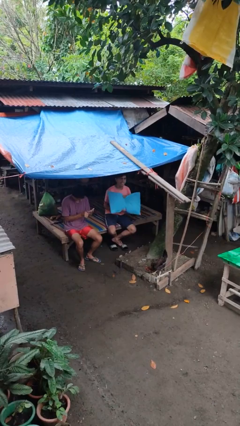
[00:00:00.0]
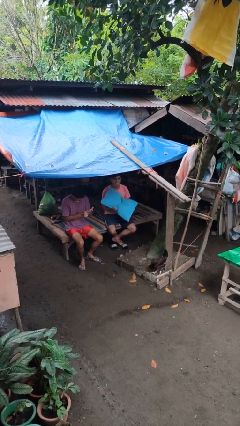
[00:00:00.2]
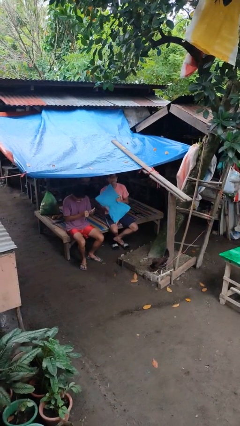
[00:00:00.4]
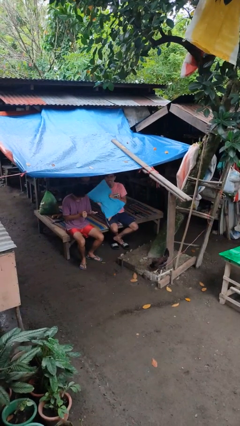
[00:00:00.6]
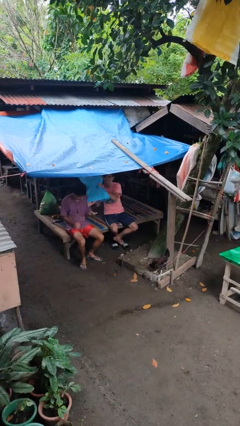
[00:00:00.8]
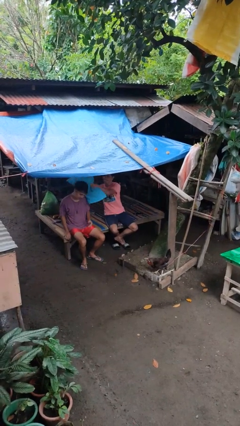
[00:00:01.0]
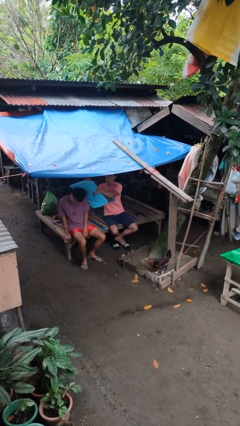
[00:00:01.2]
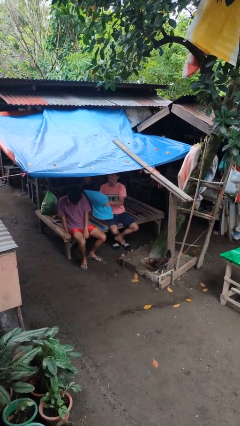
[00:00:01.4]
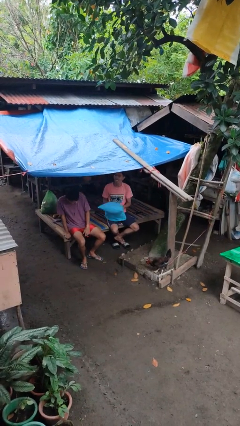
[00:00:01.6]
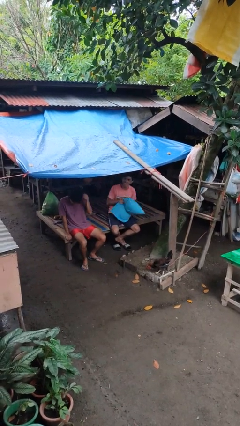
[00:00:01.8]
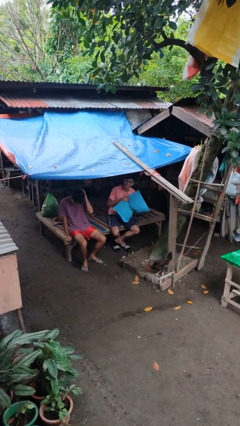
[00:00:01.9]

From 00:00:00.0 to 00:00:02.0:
person hits person with pillow

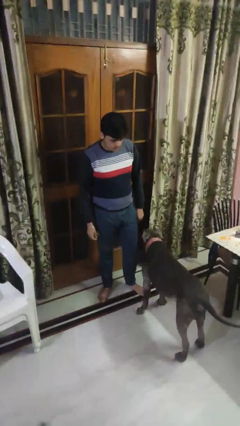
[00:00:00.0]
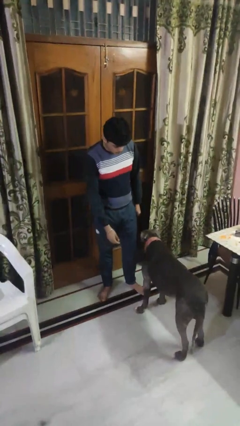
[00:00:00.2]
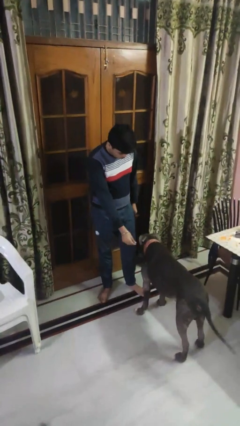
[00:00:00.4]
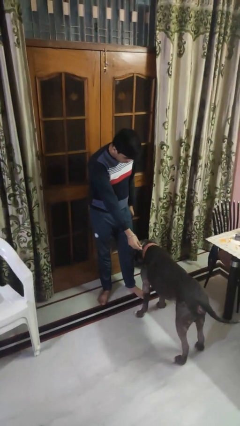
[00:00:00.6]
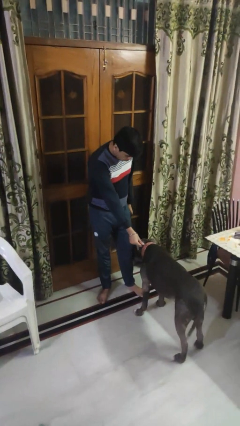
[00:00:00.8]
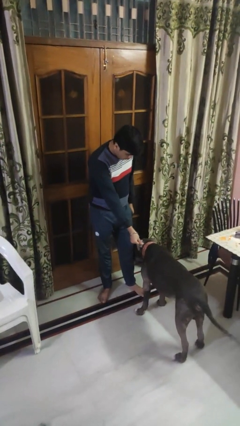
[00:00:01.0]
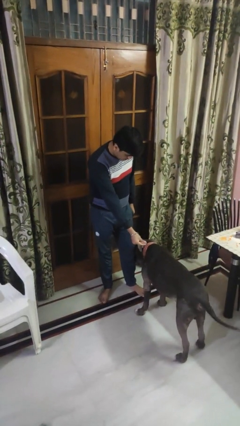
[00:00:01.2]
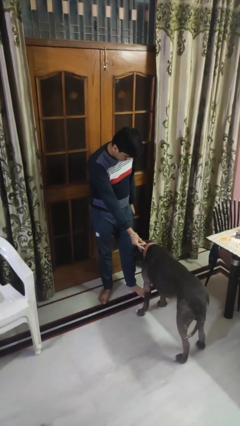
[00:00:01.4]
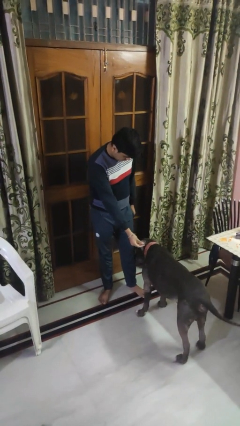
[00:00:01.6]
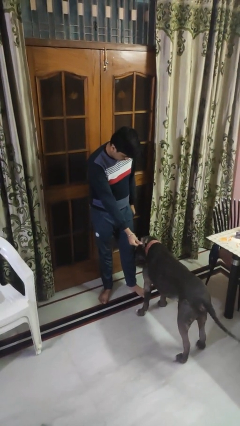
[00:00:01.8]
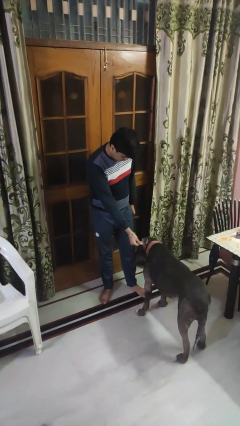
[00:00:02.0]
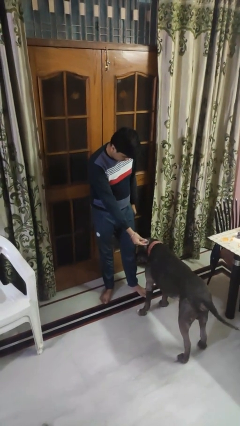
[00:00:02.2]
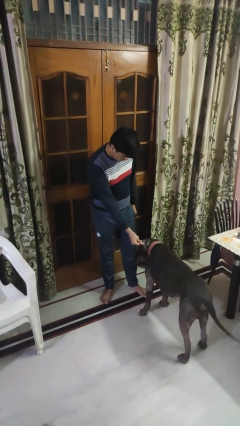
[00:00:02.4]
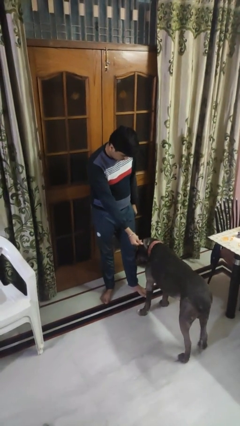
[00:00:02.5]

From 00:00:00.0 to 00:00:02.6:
person points to dog

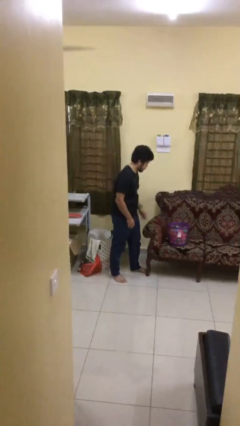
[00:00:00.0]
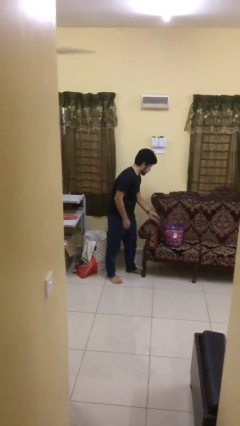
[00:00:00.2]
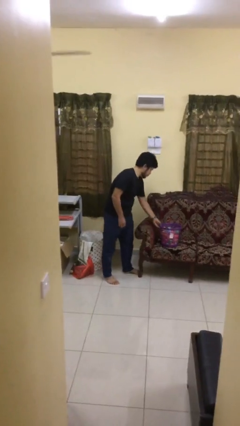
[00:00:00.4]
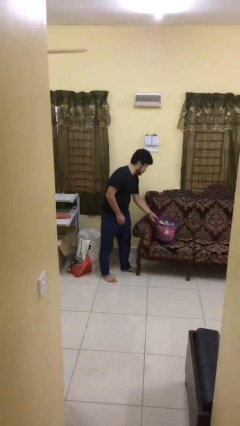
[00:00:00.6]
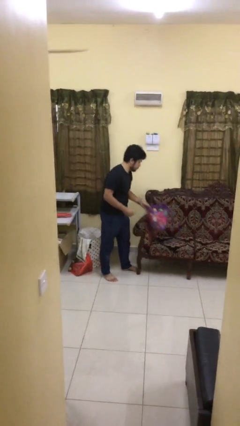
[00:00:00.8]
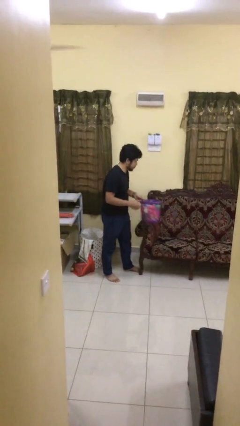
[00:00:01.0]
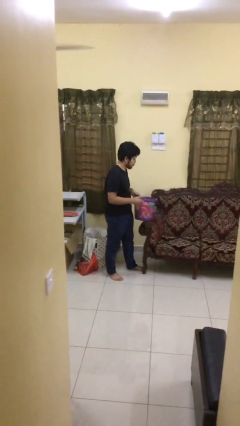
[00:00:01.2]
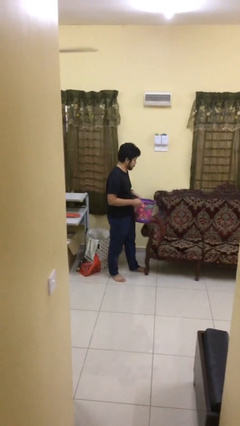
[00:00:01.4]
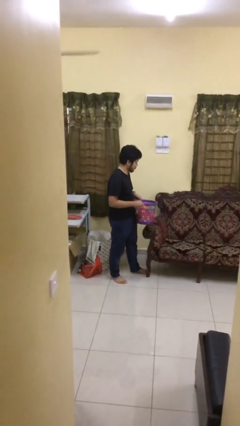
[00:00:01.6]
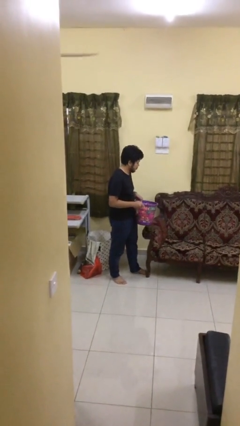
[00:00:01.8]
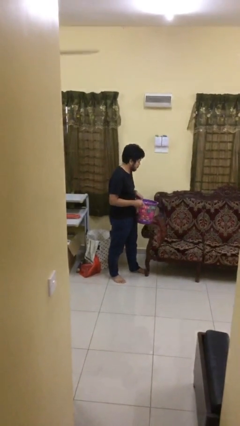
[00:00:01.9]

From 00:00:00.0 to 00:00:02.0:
person picks up object from couch

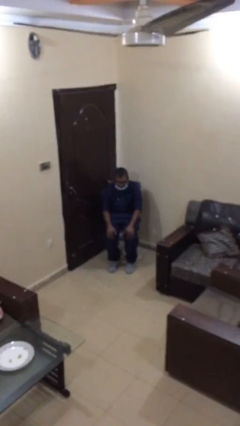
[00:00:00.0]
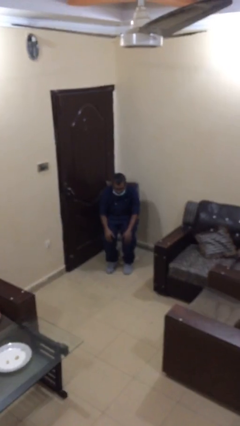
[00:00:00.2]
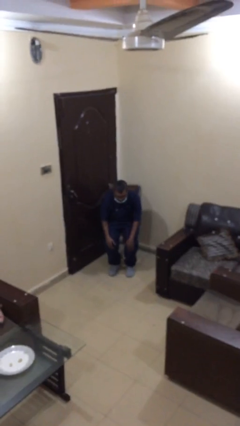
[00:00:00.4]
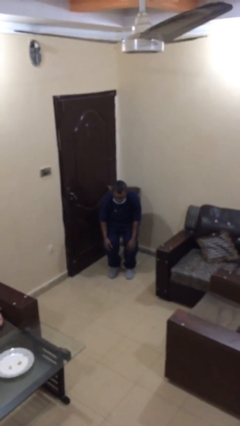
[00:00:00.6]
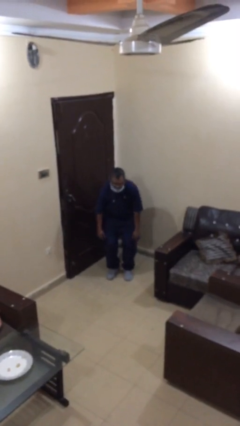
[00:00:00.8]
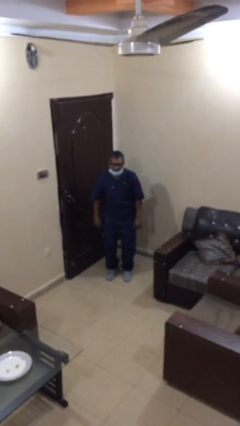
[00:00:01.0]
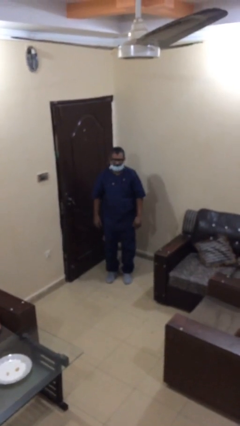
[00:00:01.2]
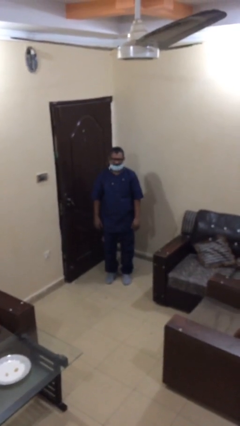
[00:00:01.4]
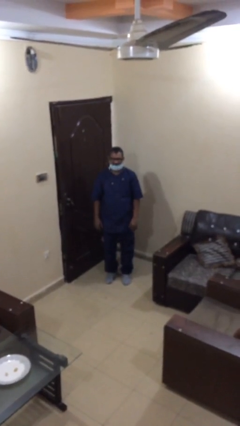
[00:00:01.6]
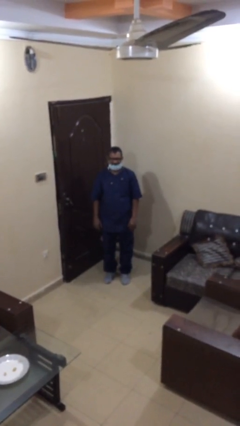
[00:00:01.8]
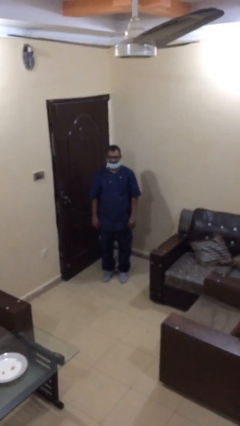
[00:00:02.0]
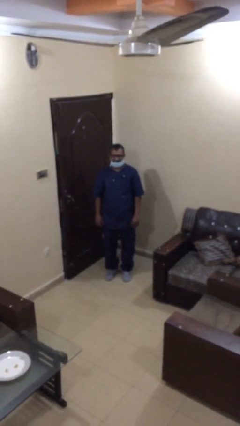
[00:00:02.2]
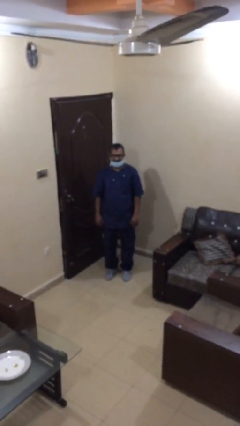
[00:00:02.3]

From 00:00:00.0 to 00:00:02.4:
person stands up

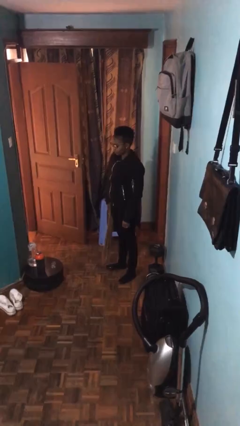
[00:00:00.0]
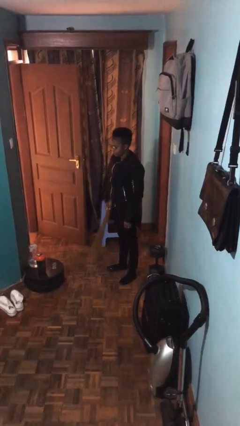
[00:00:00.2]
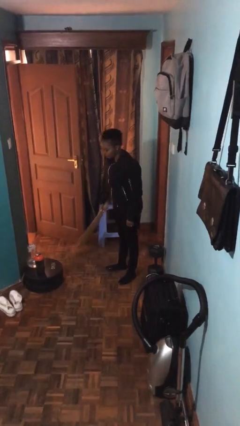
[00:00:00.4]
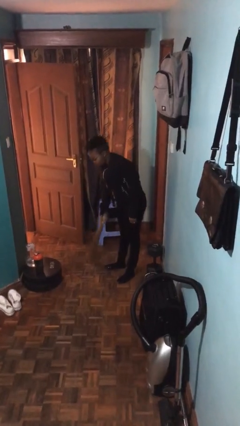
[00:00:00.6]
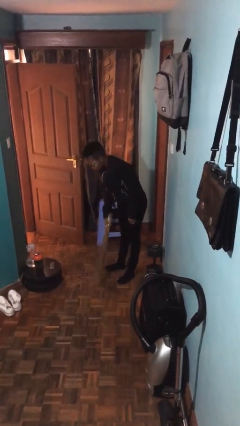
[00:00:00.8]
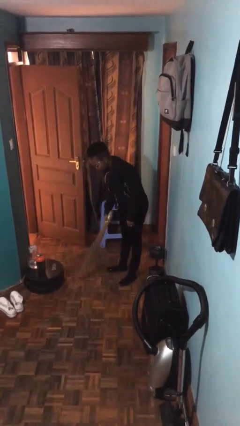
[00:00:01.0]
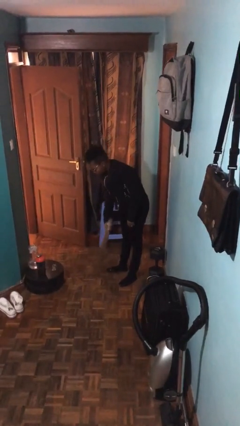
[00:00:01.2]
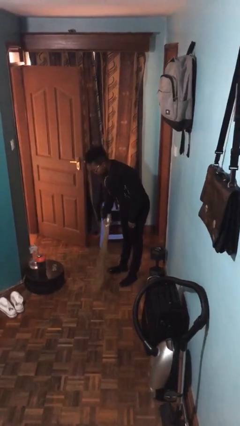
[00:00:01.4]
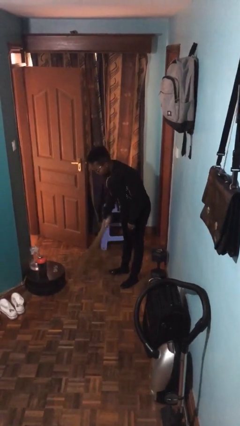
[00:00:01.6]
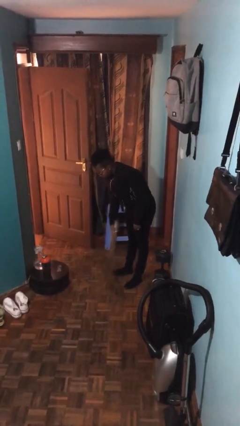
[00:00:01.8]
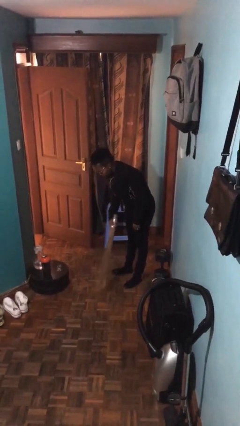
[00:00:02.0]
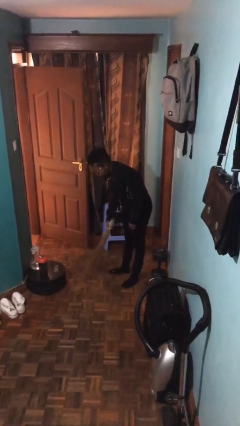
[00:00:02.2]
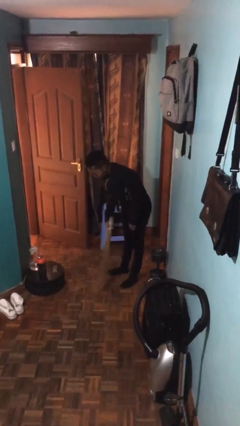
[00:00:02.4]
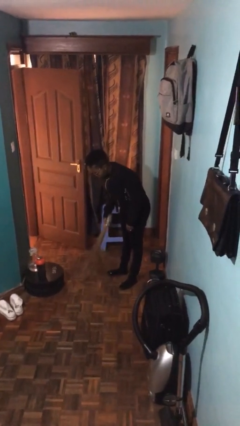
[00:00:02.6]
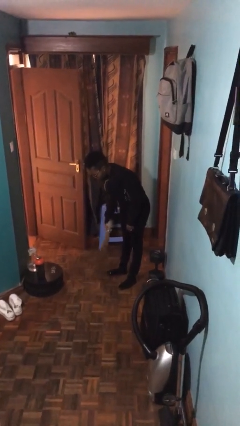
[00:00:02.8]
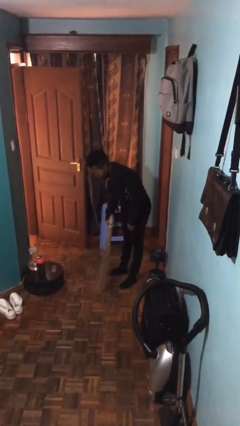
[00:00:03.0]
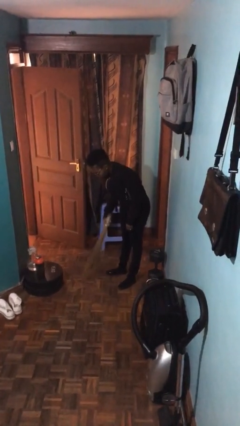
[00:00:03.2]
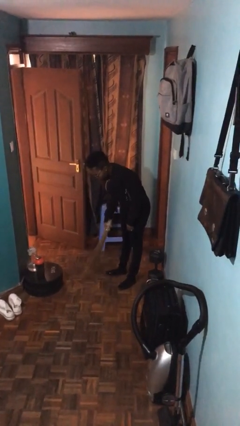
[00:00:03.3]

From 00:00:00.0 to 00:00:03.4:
person sweeps floor

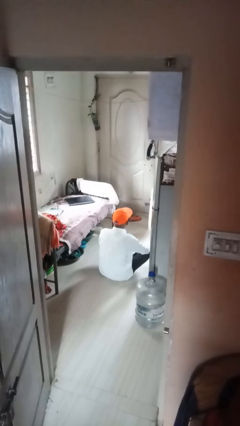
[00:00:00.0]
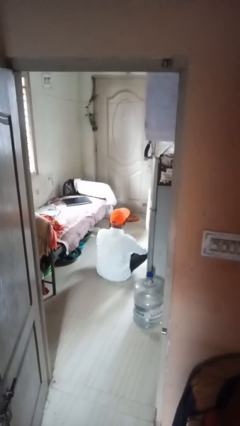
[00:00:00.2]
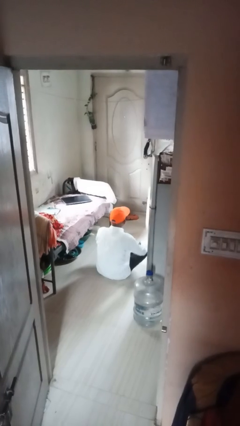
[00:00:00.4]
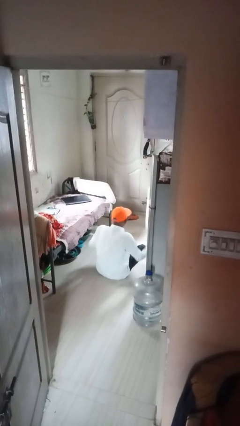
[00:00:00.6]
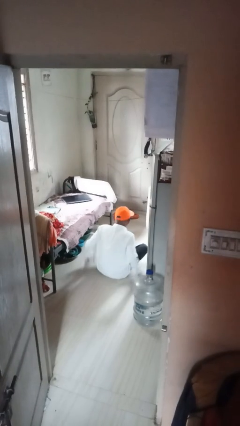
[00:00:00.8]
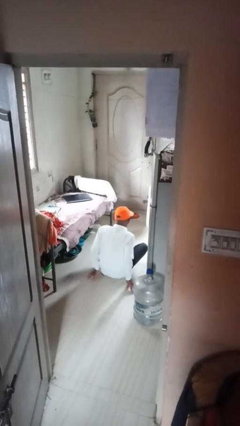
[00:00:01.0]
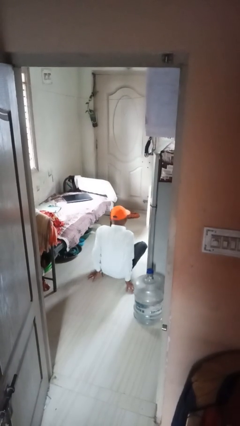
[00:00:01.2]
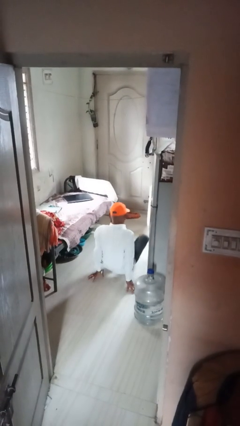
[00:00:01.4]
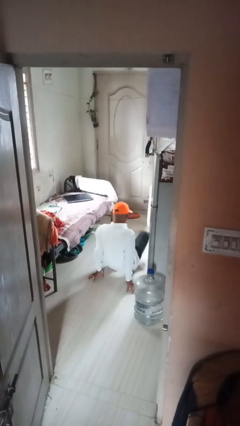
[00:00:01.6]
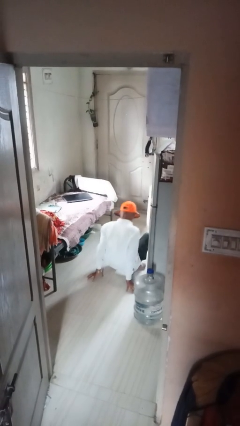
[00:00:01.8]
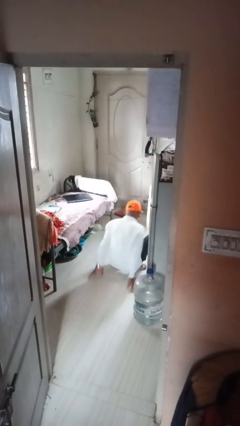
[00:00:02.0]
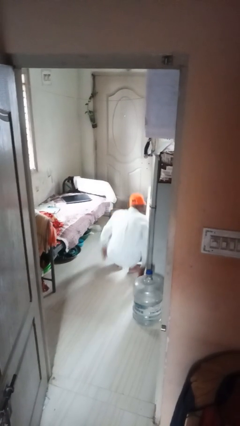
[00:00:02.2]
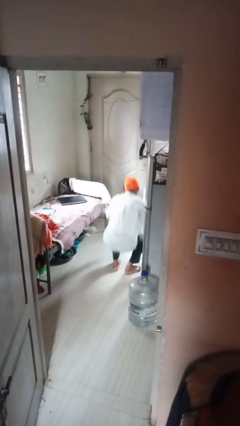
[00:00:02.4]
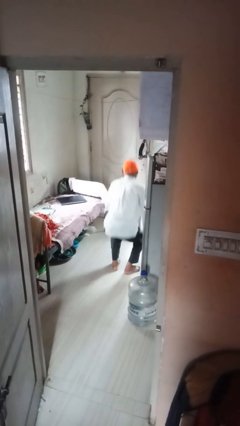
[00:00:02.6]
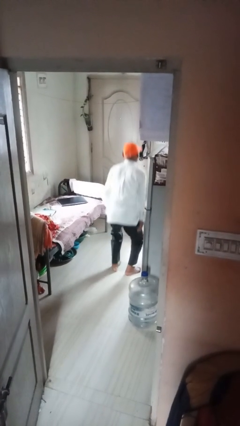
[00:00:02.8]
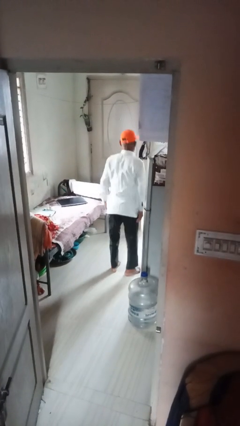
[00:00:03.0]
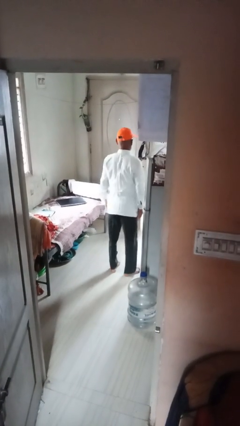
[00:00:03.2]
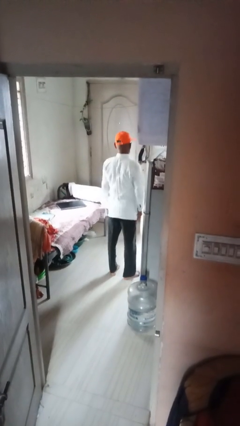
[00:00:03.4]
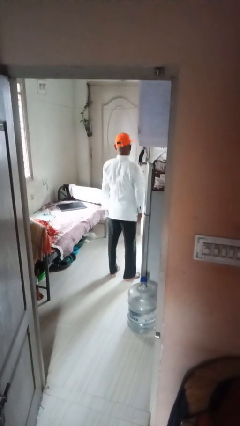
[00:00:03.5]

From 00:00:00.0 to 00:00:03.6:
person stands up from floor

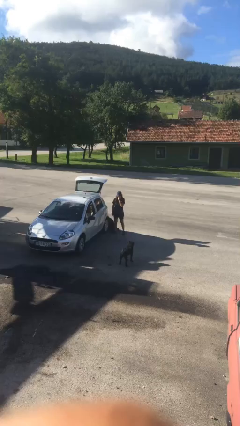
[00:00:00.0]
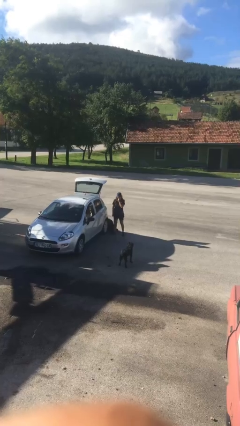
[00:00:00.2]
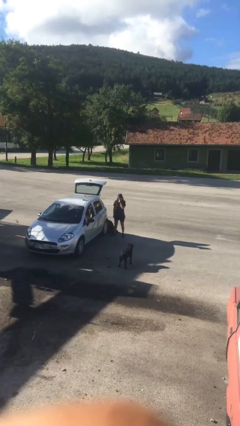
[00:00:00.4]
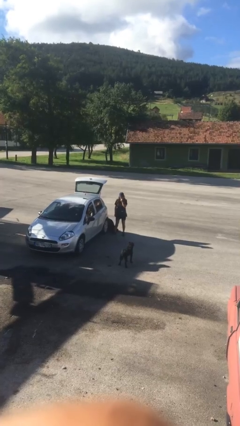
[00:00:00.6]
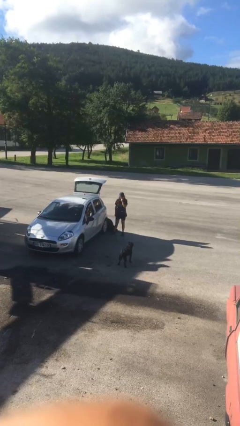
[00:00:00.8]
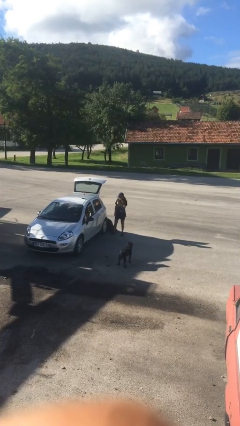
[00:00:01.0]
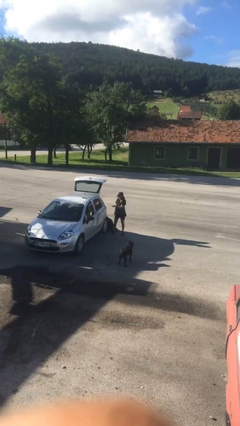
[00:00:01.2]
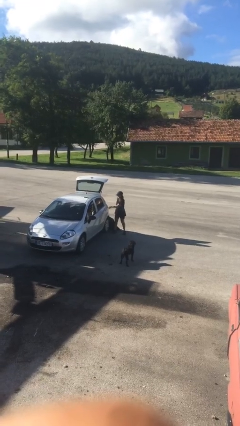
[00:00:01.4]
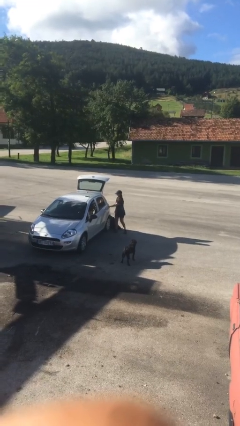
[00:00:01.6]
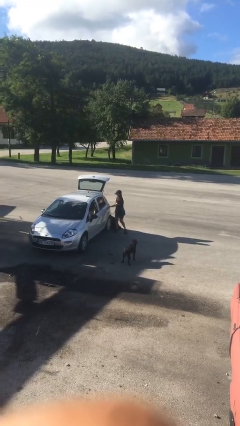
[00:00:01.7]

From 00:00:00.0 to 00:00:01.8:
person opens car door
